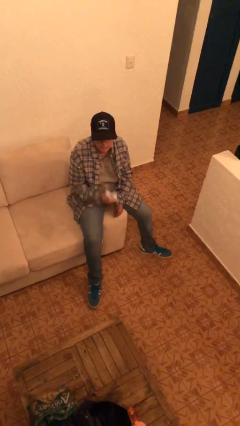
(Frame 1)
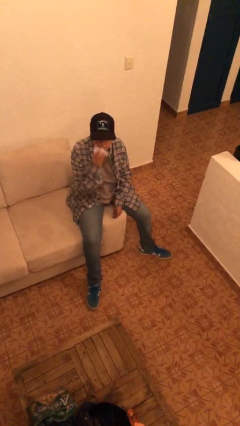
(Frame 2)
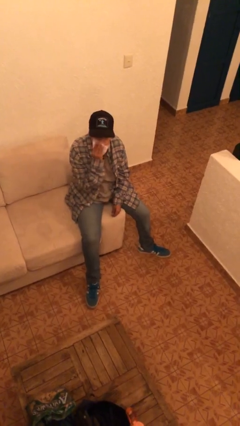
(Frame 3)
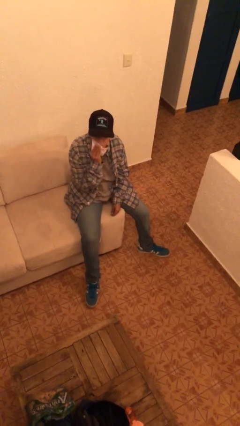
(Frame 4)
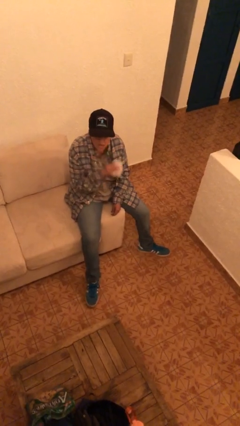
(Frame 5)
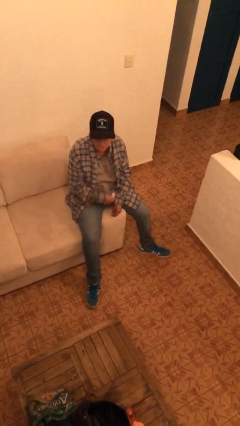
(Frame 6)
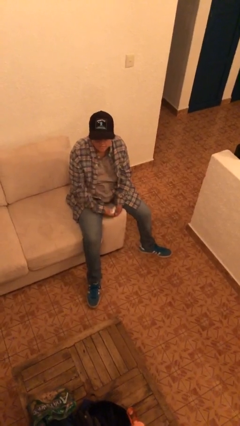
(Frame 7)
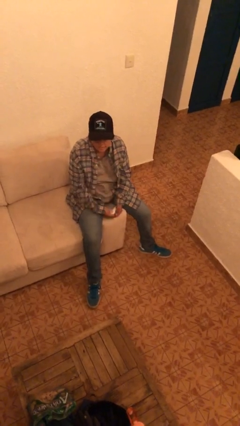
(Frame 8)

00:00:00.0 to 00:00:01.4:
person wipes mouth with napkin

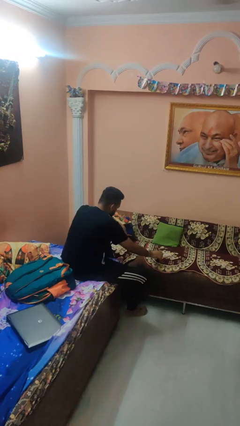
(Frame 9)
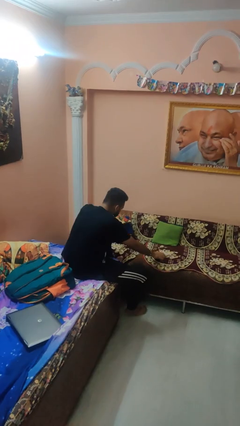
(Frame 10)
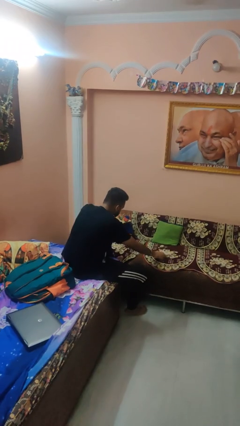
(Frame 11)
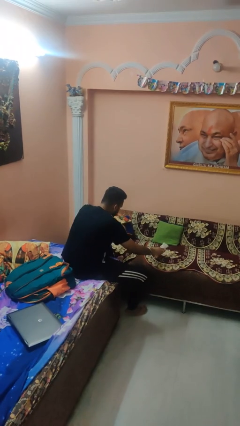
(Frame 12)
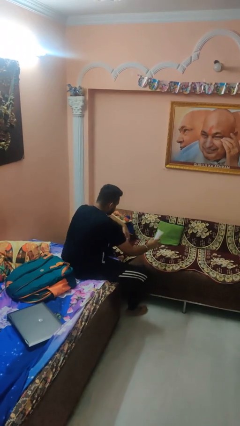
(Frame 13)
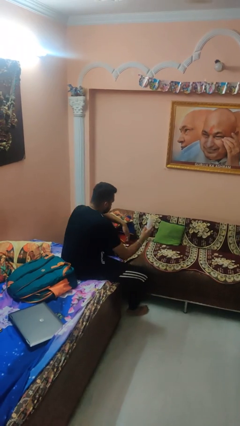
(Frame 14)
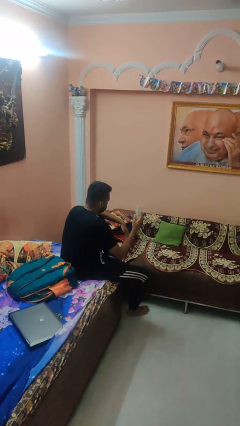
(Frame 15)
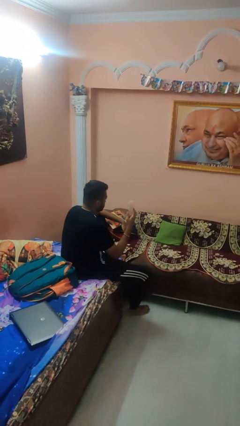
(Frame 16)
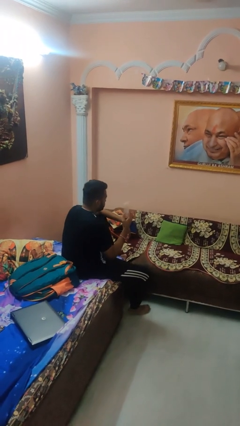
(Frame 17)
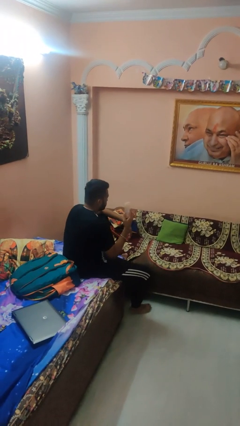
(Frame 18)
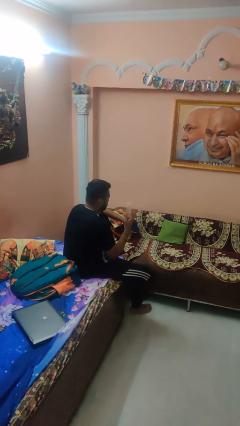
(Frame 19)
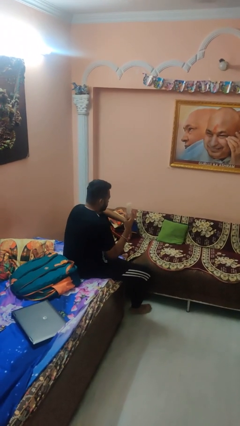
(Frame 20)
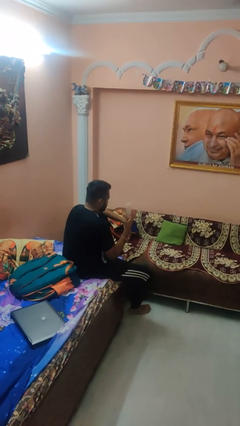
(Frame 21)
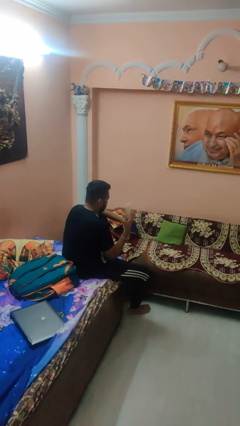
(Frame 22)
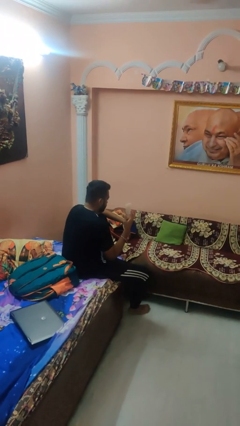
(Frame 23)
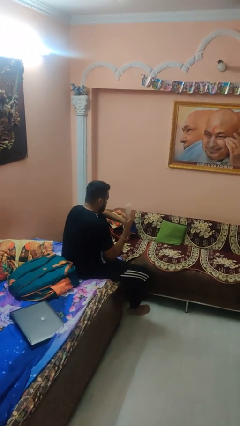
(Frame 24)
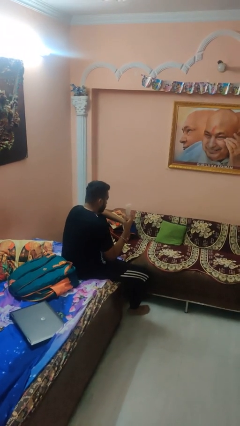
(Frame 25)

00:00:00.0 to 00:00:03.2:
person picks up object from couch

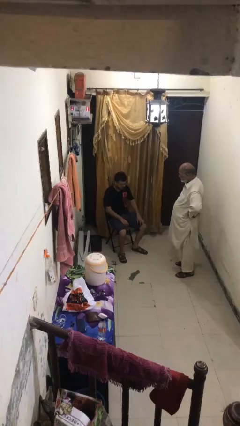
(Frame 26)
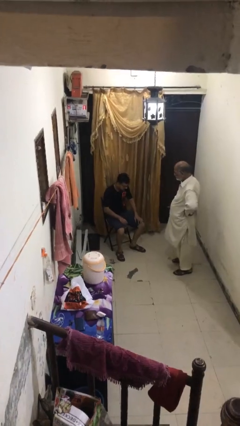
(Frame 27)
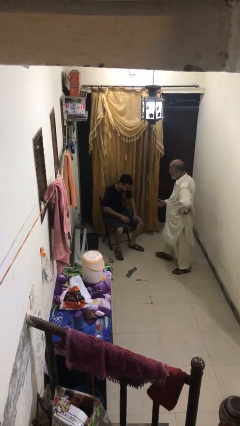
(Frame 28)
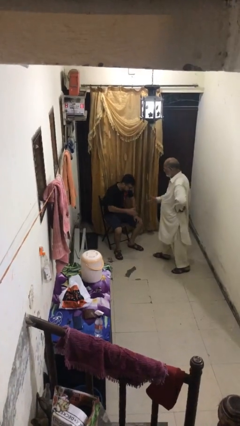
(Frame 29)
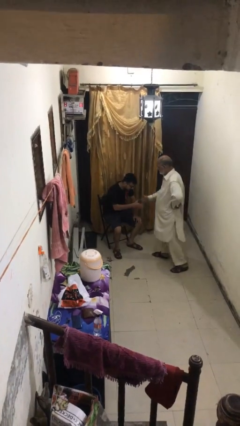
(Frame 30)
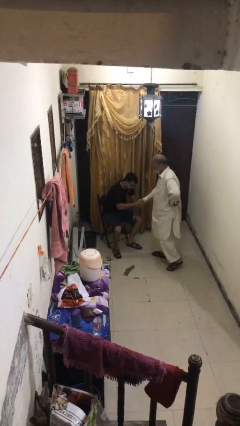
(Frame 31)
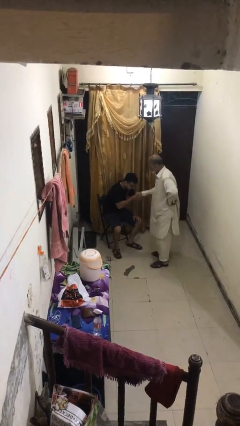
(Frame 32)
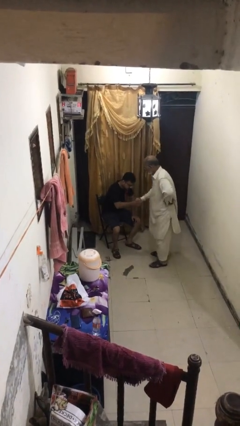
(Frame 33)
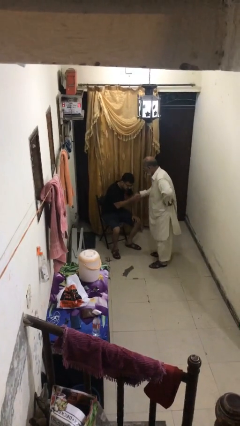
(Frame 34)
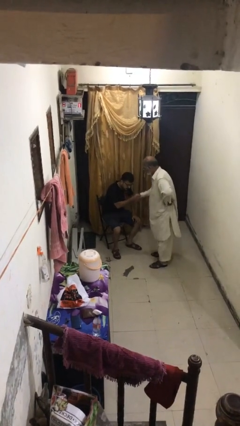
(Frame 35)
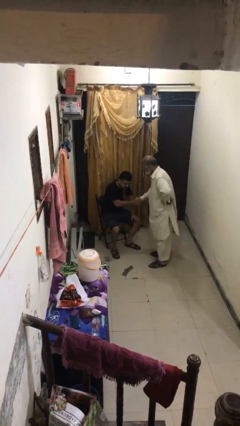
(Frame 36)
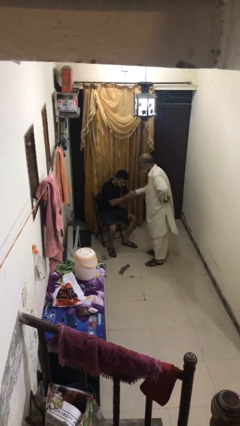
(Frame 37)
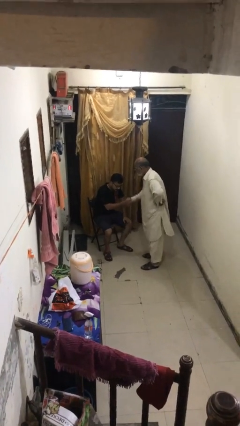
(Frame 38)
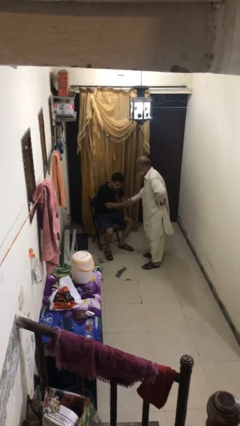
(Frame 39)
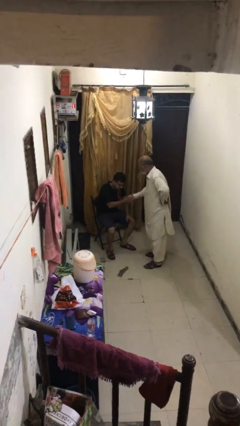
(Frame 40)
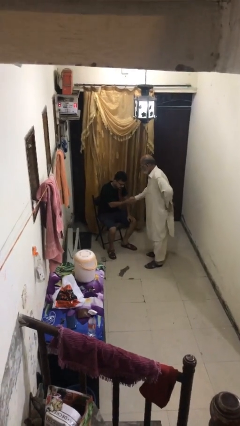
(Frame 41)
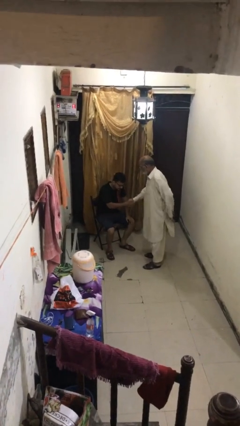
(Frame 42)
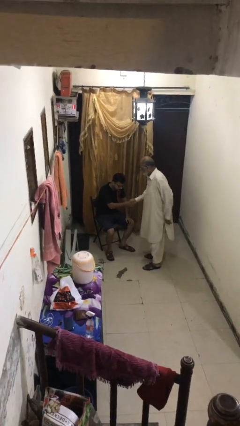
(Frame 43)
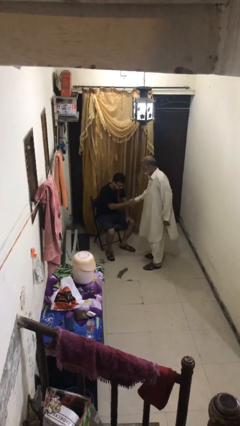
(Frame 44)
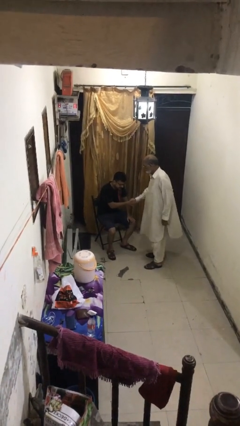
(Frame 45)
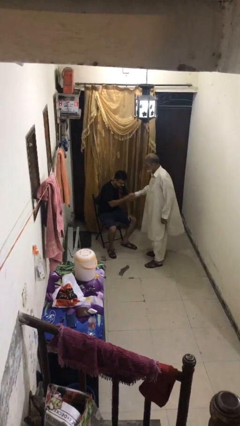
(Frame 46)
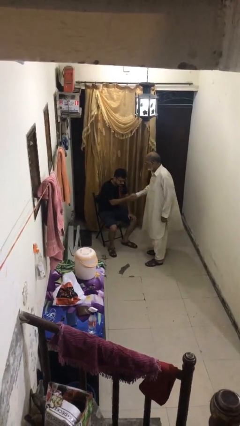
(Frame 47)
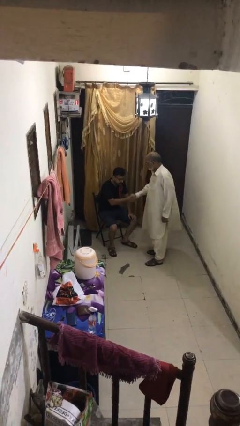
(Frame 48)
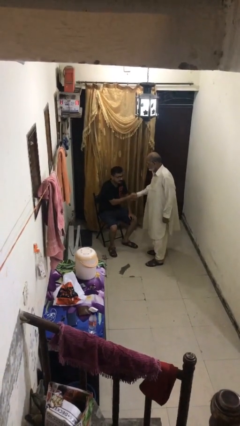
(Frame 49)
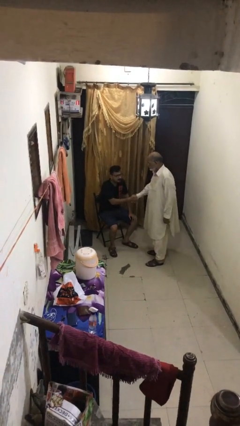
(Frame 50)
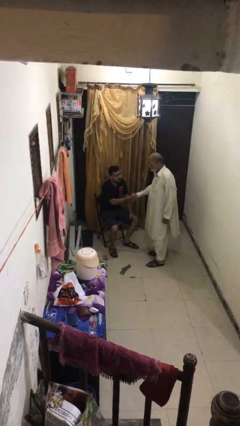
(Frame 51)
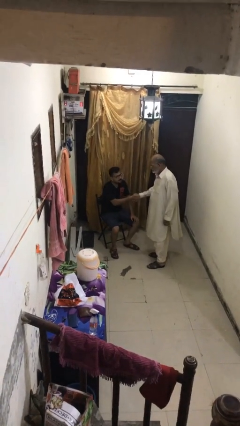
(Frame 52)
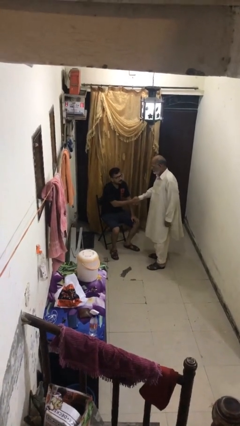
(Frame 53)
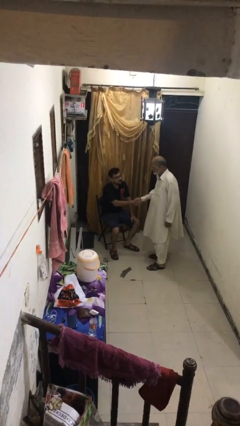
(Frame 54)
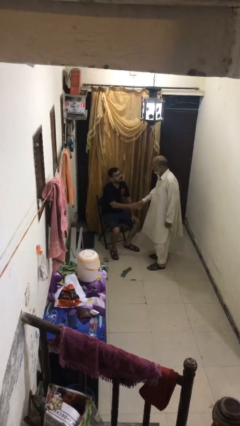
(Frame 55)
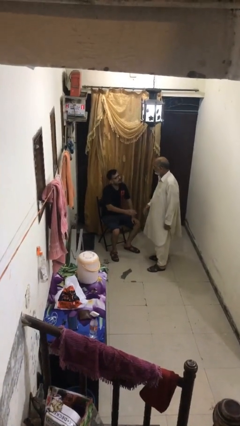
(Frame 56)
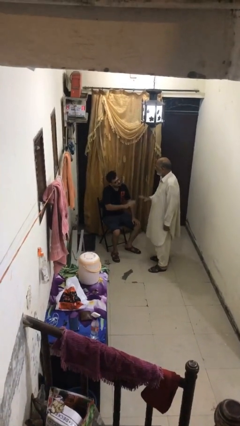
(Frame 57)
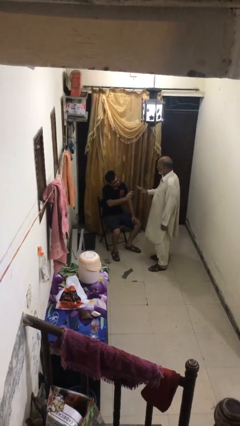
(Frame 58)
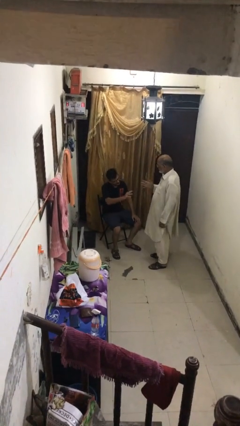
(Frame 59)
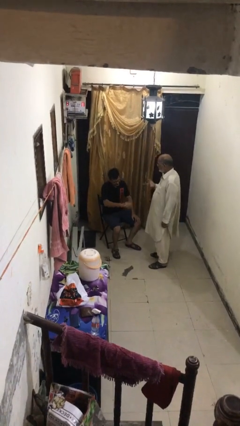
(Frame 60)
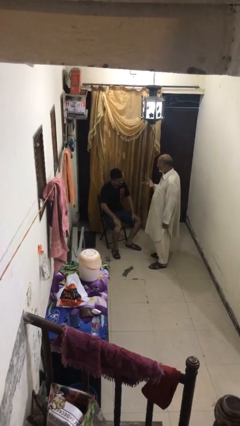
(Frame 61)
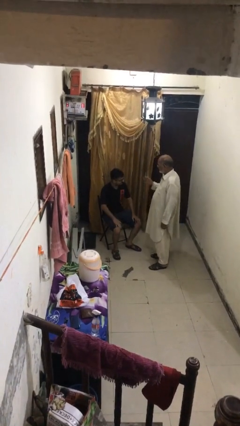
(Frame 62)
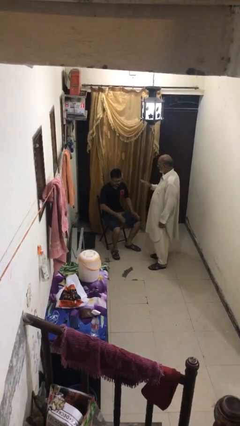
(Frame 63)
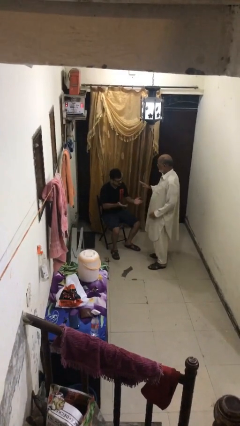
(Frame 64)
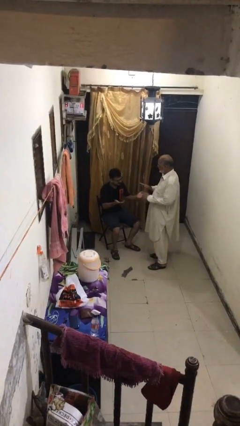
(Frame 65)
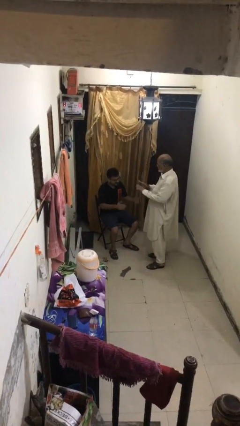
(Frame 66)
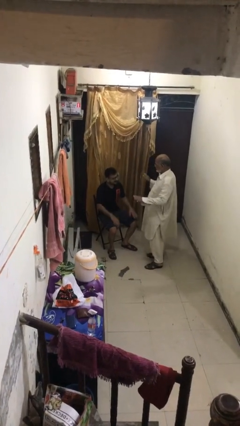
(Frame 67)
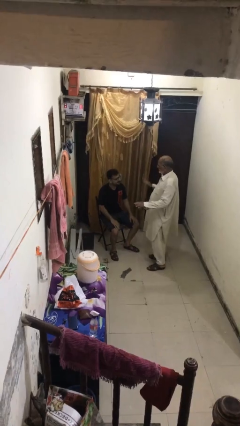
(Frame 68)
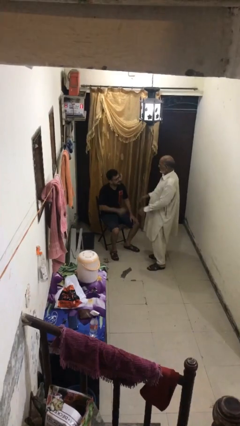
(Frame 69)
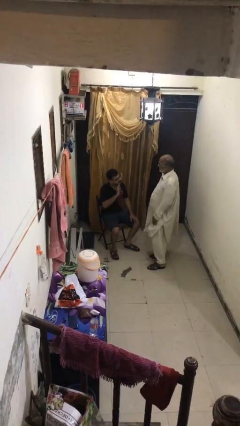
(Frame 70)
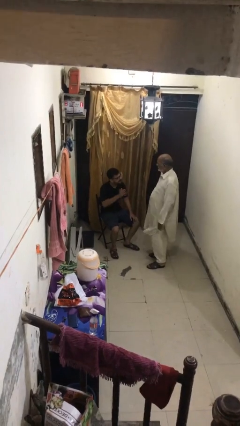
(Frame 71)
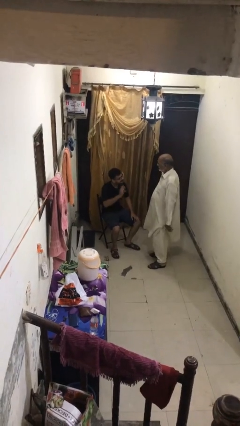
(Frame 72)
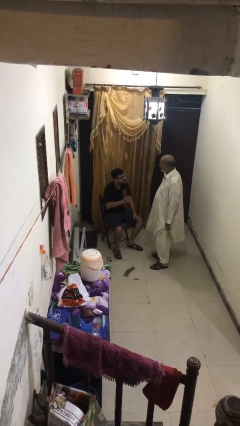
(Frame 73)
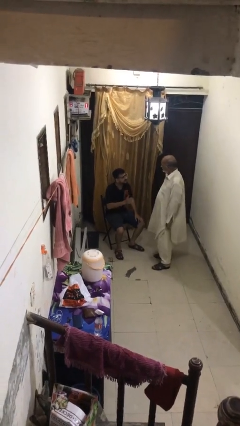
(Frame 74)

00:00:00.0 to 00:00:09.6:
person shakes hand

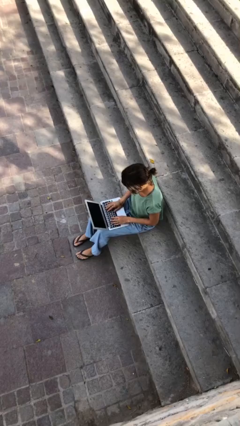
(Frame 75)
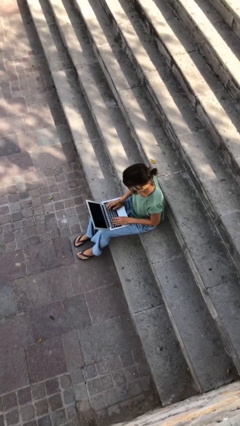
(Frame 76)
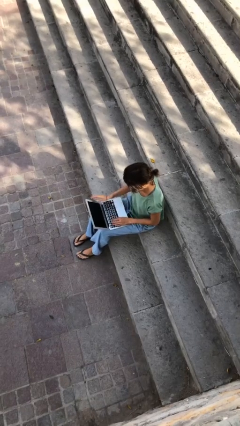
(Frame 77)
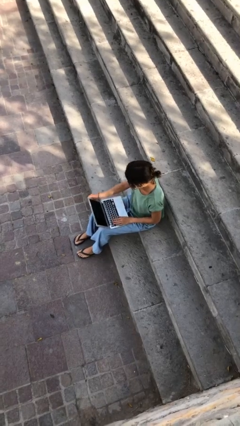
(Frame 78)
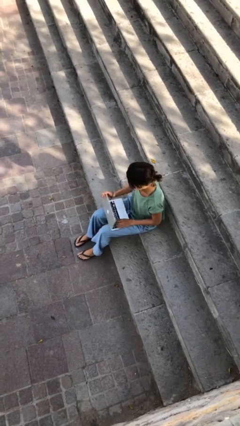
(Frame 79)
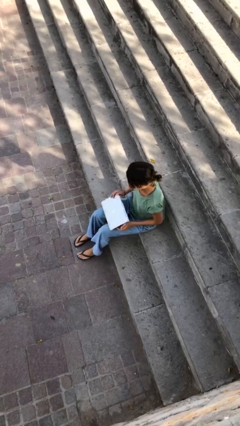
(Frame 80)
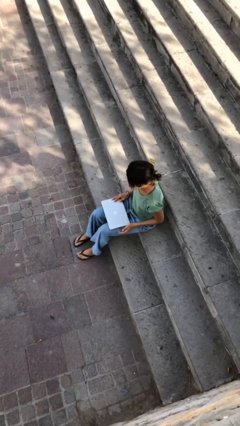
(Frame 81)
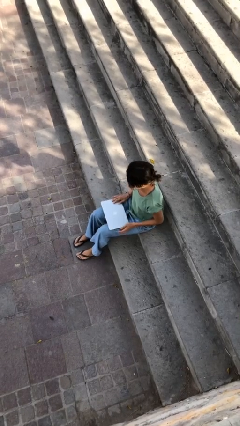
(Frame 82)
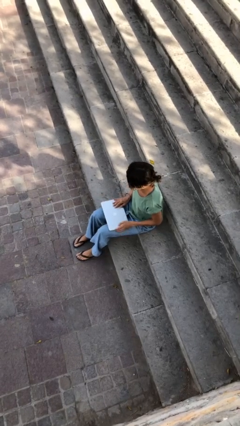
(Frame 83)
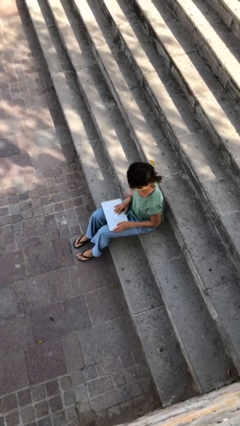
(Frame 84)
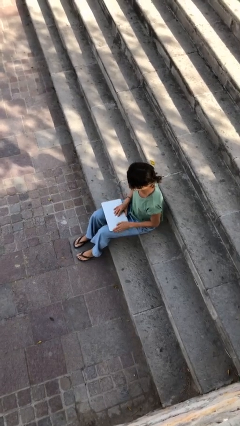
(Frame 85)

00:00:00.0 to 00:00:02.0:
person interacts with laptop

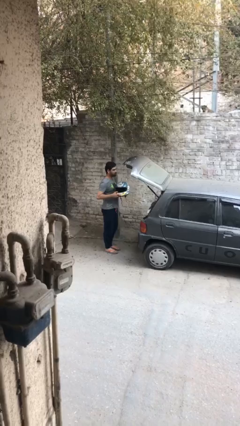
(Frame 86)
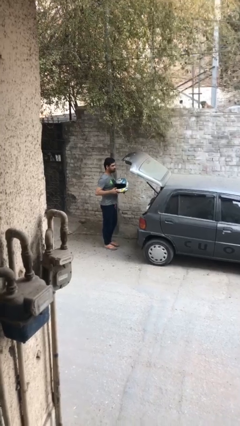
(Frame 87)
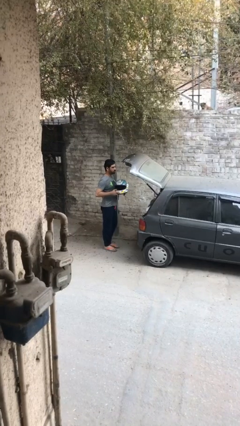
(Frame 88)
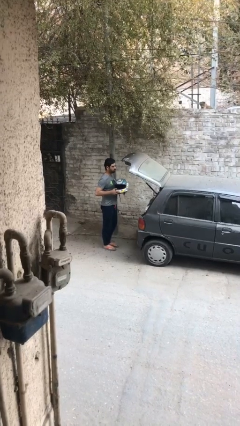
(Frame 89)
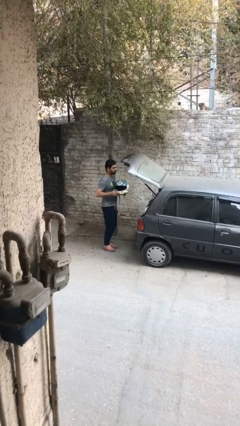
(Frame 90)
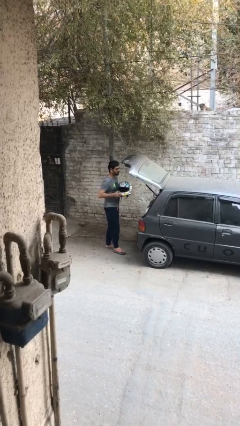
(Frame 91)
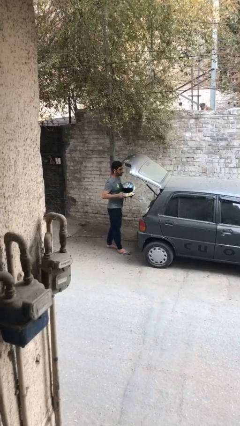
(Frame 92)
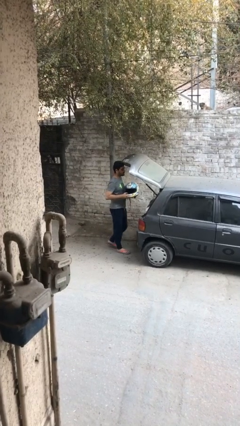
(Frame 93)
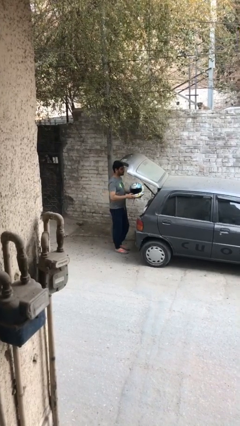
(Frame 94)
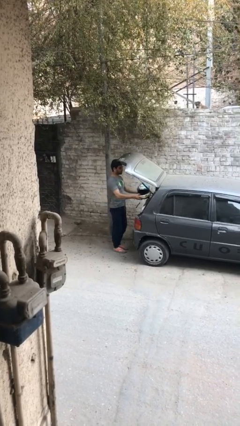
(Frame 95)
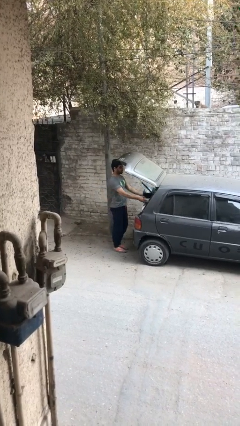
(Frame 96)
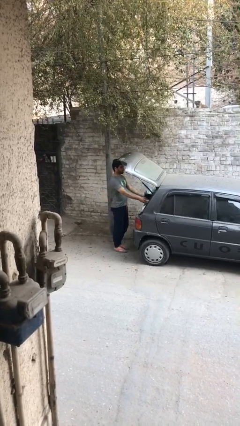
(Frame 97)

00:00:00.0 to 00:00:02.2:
person loads car
